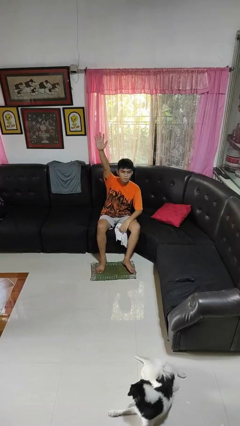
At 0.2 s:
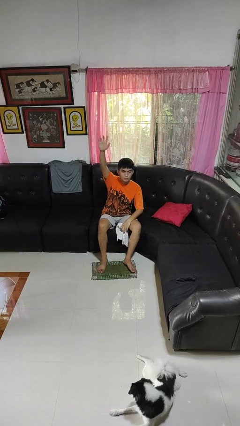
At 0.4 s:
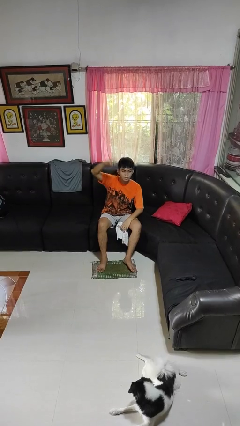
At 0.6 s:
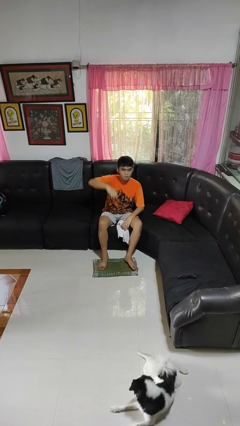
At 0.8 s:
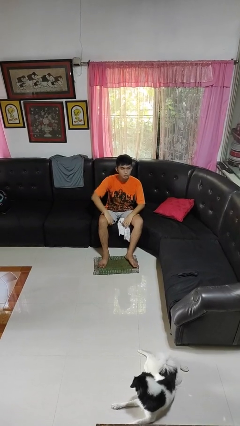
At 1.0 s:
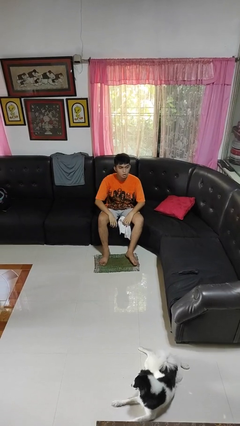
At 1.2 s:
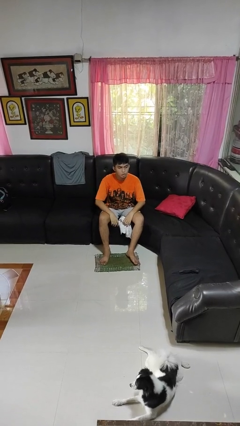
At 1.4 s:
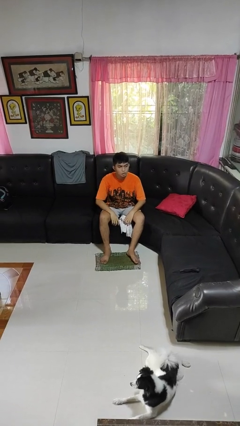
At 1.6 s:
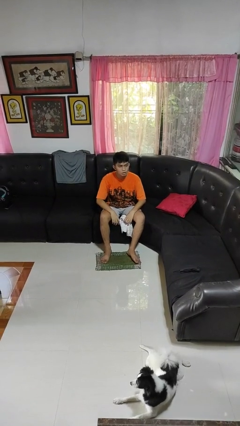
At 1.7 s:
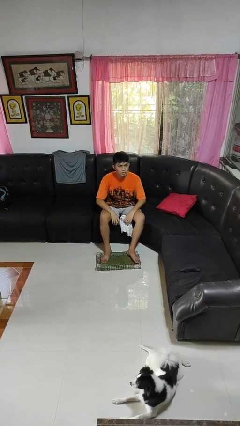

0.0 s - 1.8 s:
person gestures lower hand

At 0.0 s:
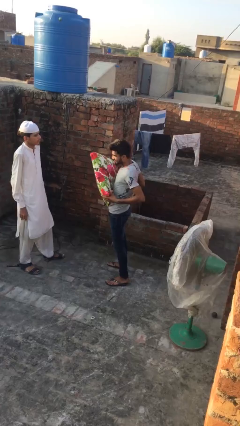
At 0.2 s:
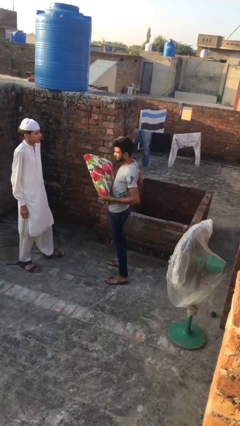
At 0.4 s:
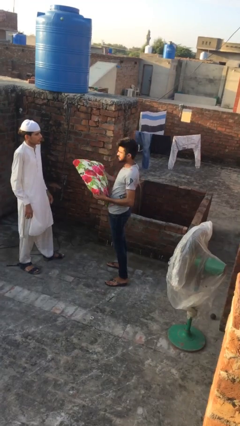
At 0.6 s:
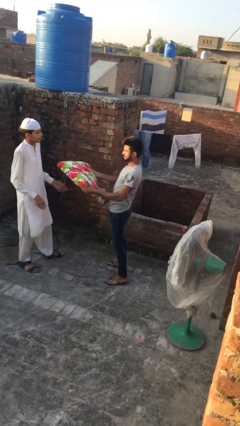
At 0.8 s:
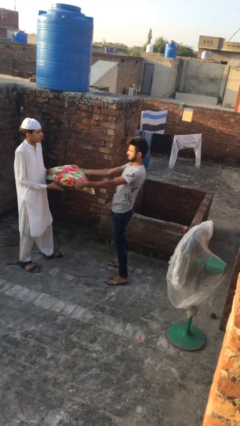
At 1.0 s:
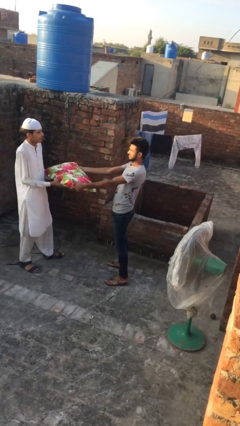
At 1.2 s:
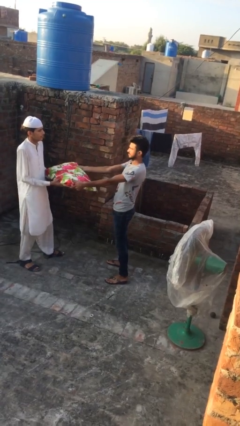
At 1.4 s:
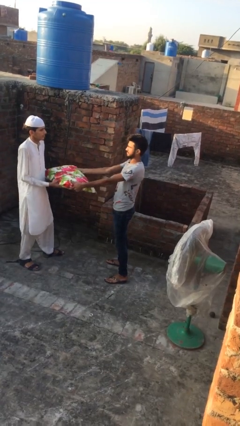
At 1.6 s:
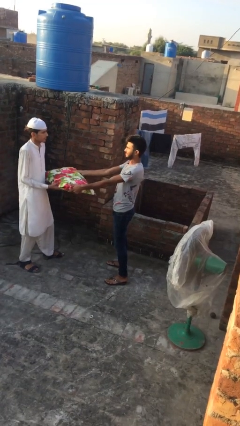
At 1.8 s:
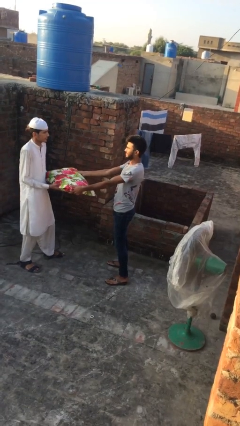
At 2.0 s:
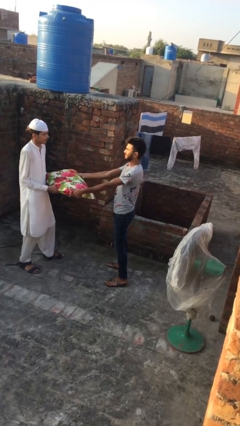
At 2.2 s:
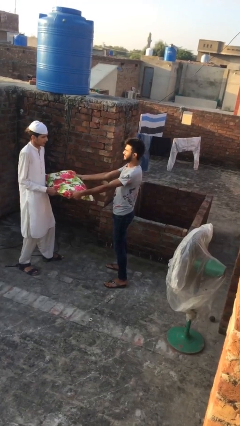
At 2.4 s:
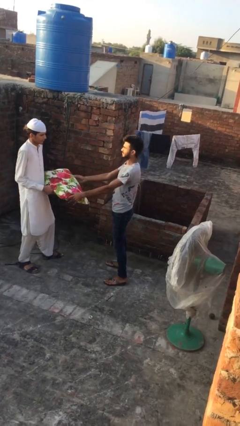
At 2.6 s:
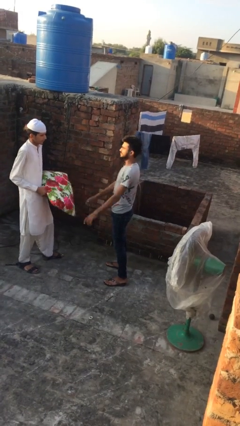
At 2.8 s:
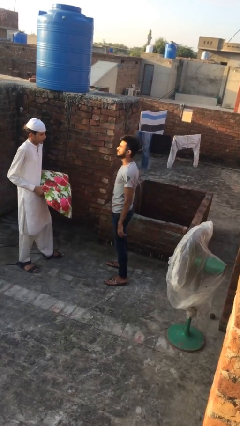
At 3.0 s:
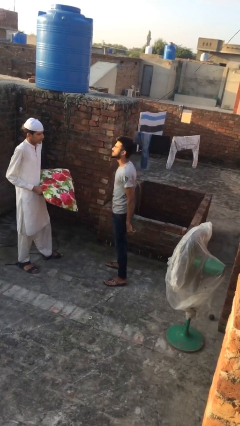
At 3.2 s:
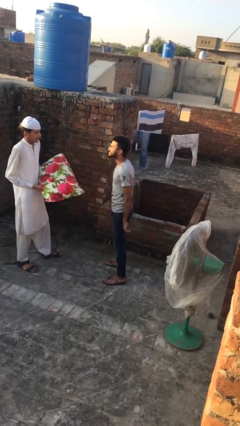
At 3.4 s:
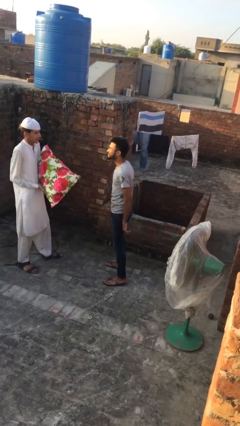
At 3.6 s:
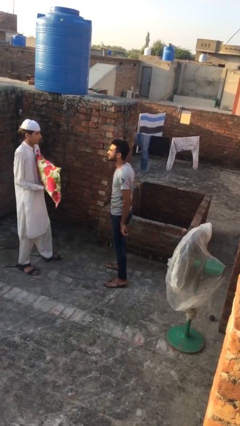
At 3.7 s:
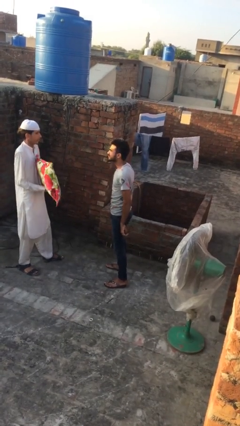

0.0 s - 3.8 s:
person transfers object to person

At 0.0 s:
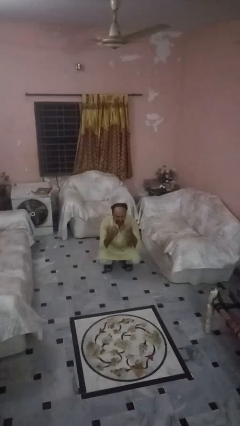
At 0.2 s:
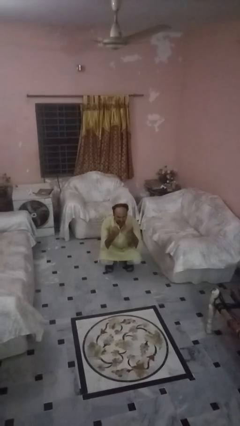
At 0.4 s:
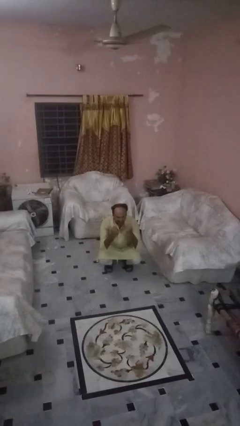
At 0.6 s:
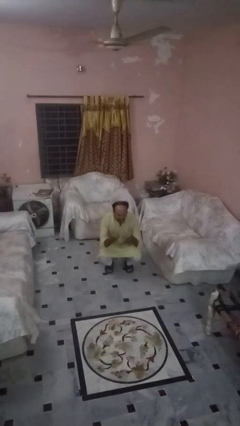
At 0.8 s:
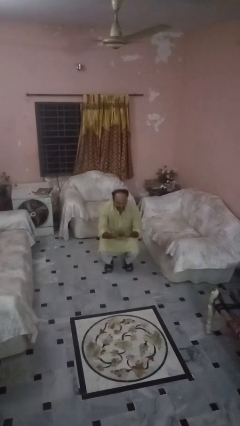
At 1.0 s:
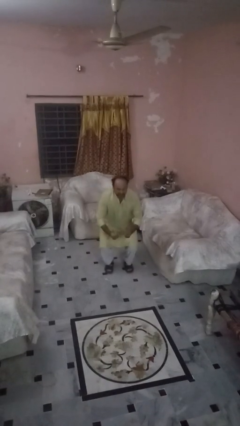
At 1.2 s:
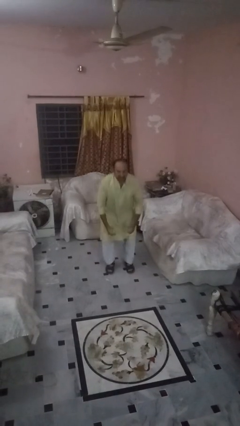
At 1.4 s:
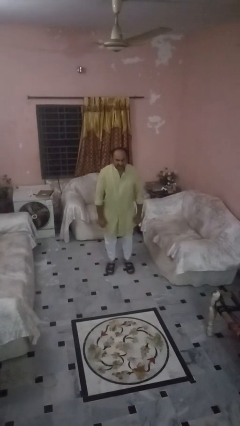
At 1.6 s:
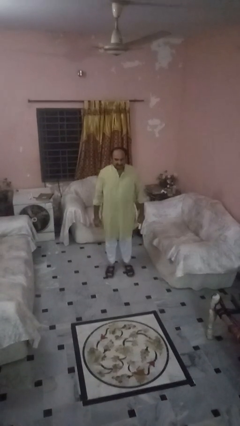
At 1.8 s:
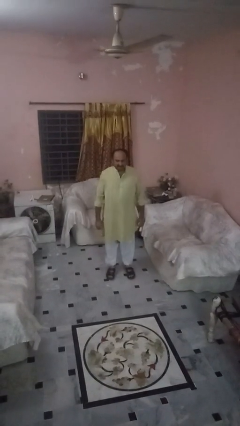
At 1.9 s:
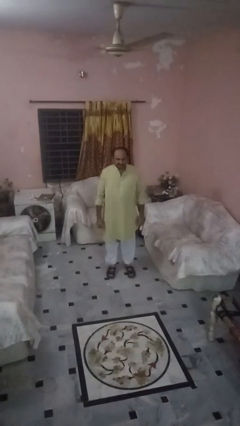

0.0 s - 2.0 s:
person stands up

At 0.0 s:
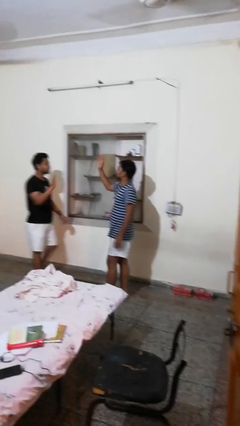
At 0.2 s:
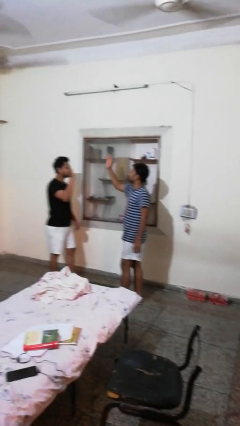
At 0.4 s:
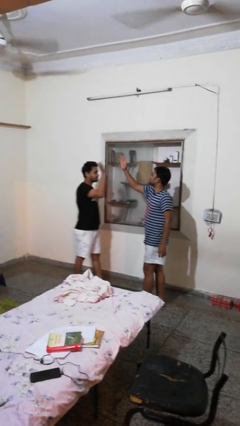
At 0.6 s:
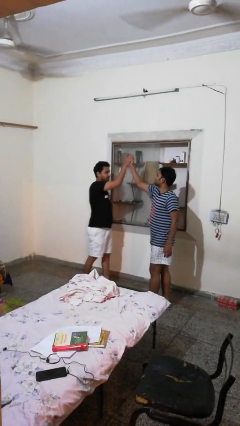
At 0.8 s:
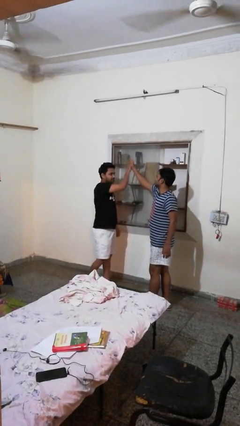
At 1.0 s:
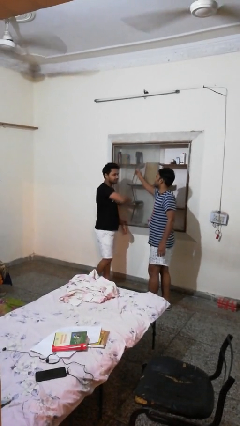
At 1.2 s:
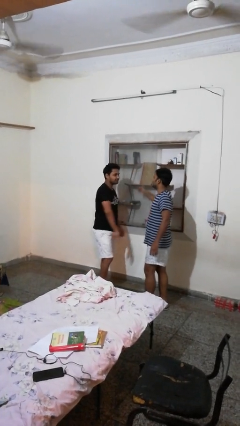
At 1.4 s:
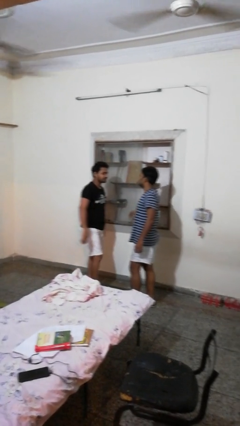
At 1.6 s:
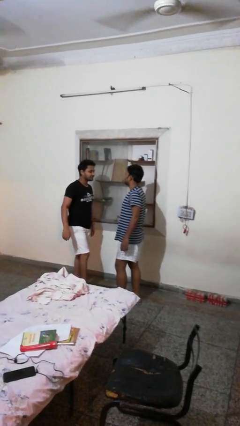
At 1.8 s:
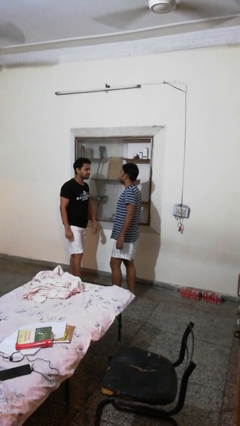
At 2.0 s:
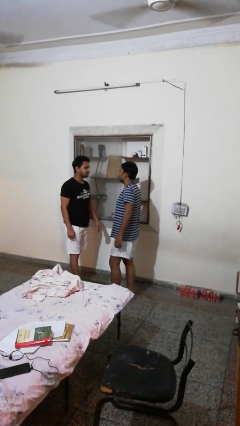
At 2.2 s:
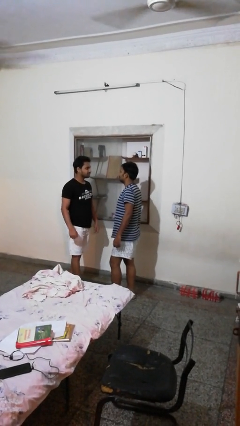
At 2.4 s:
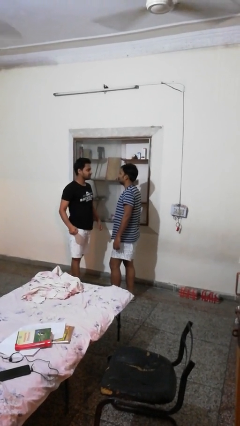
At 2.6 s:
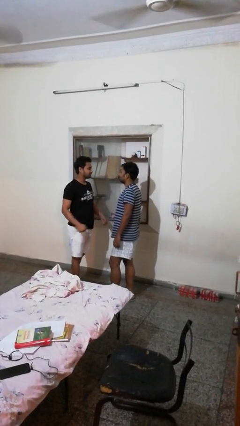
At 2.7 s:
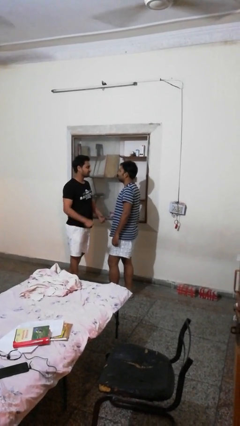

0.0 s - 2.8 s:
person highfives hand

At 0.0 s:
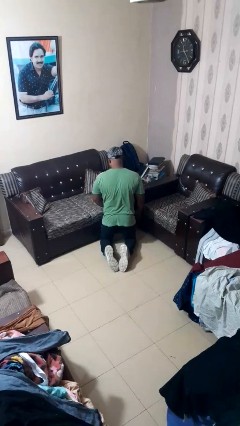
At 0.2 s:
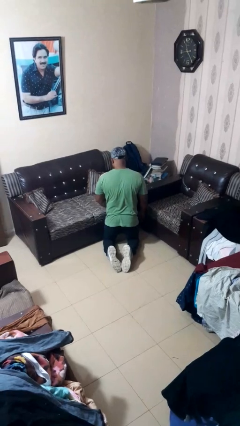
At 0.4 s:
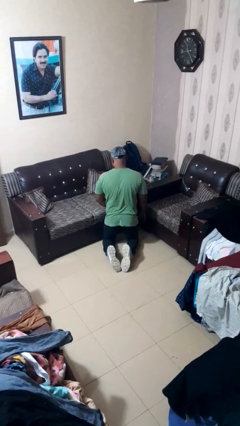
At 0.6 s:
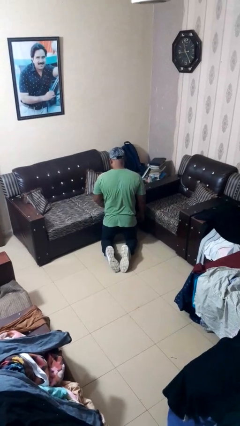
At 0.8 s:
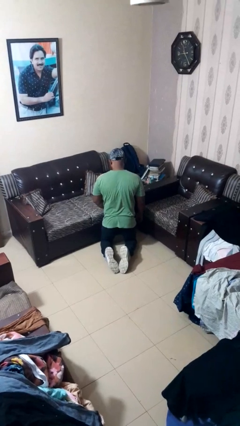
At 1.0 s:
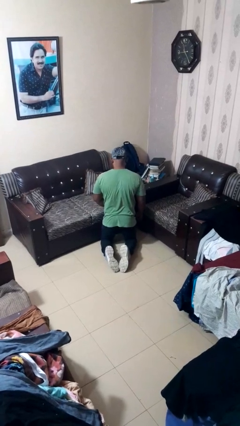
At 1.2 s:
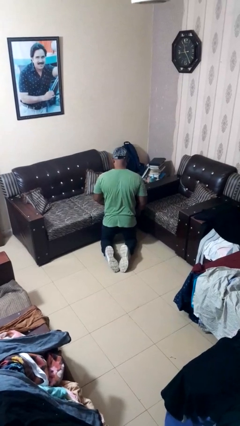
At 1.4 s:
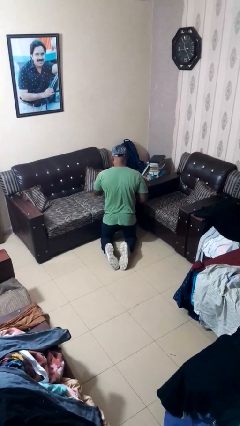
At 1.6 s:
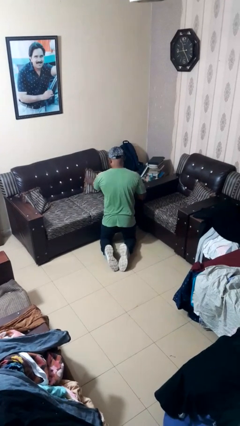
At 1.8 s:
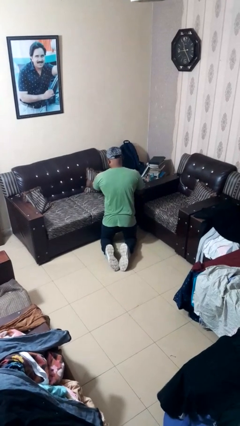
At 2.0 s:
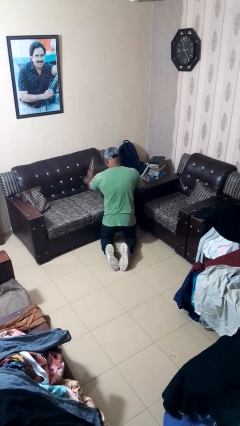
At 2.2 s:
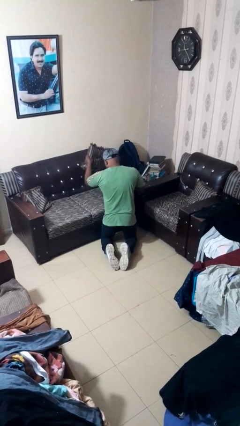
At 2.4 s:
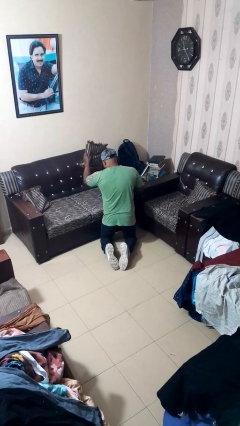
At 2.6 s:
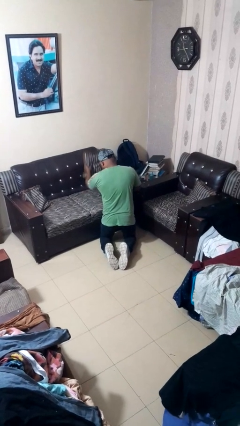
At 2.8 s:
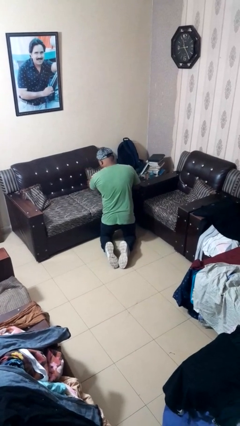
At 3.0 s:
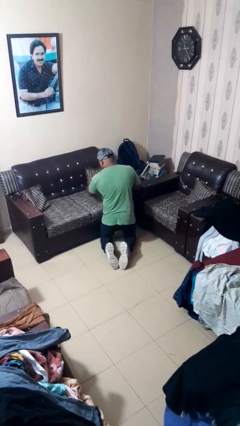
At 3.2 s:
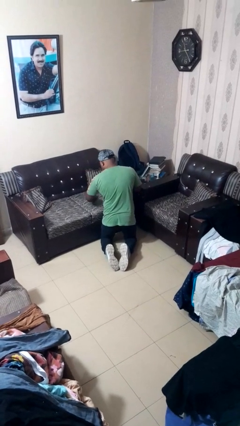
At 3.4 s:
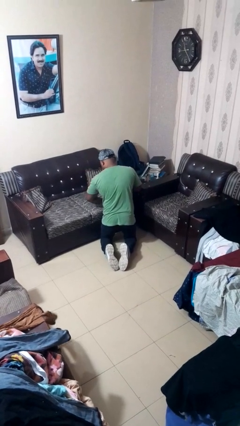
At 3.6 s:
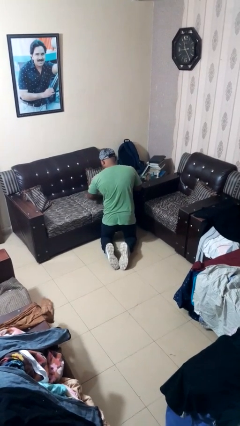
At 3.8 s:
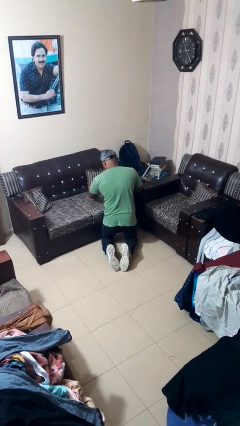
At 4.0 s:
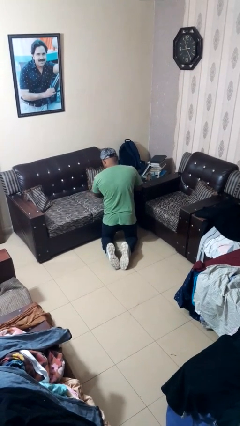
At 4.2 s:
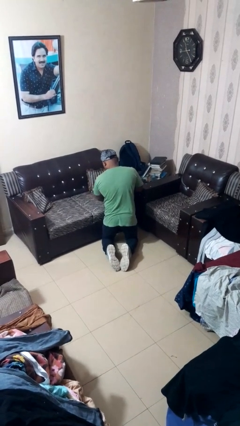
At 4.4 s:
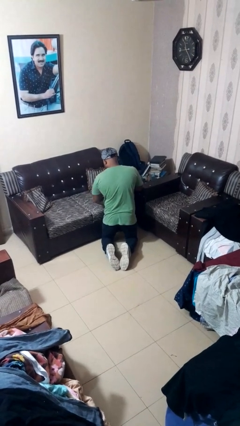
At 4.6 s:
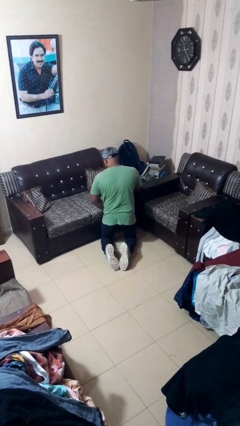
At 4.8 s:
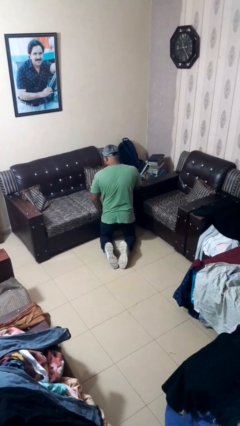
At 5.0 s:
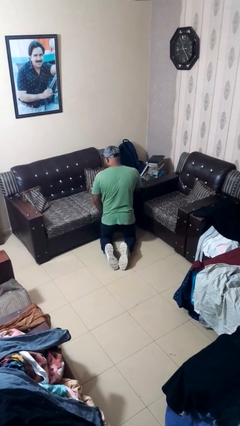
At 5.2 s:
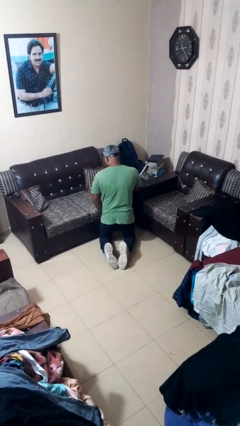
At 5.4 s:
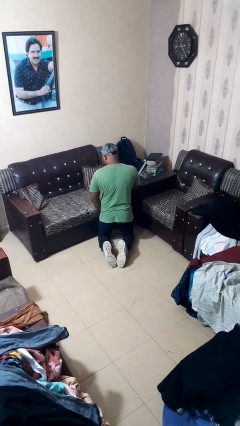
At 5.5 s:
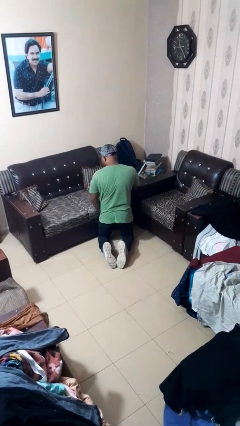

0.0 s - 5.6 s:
person searches in couch

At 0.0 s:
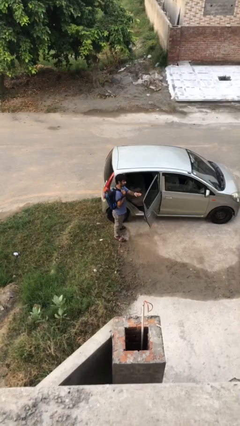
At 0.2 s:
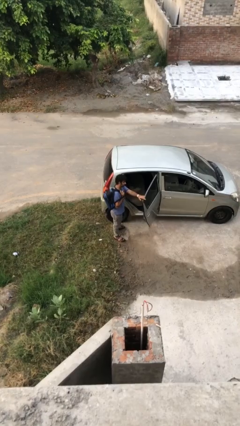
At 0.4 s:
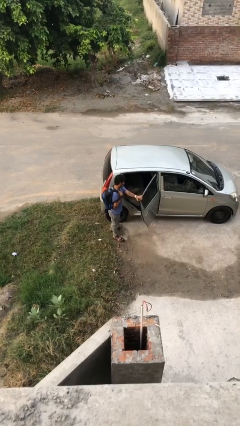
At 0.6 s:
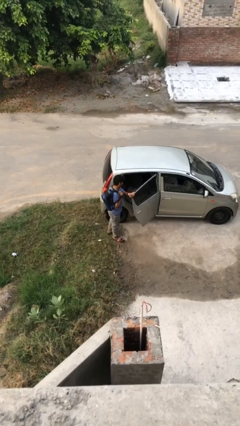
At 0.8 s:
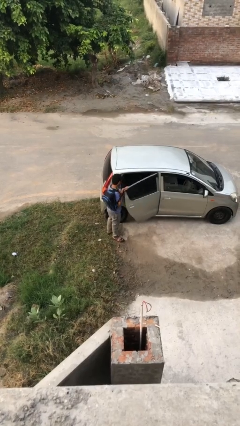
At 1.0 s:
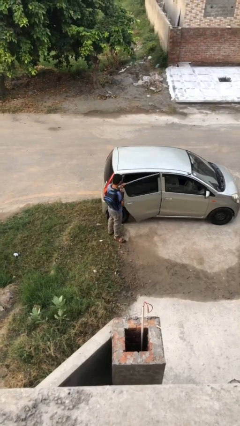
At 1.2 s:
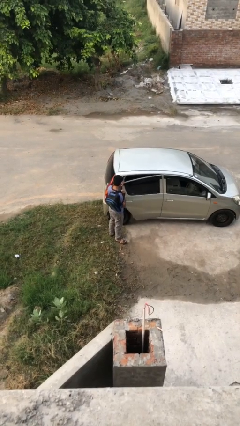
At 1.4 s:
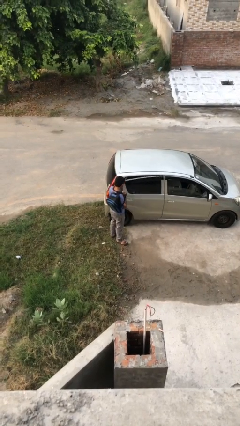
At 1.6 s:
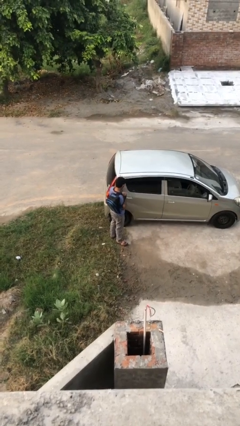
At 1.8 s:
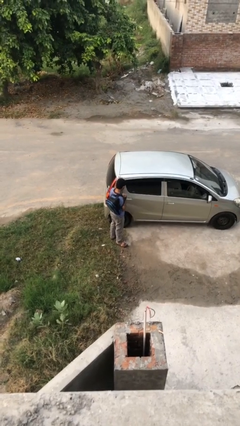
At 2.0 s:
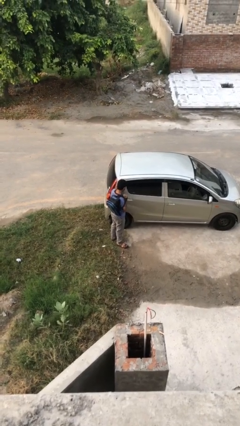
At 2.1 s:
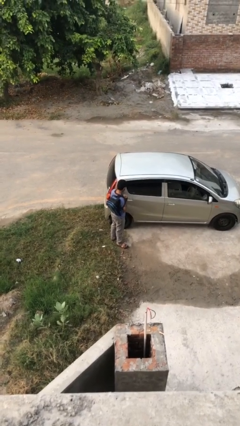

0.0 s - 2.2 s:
person closes car door
